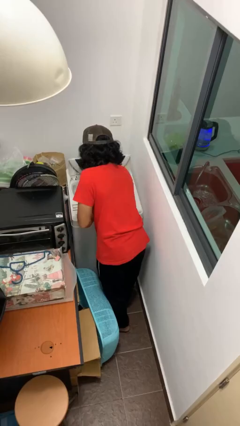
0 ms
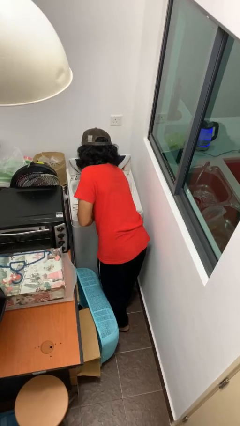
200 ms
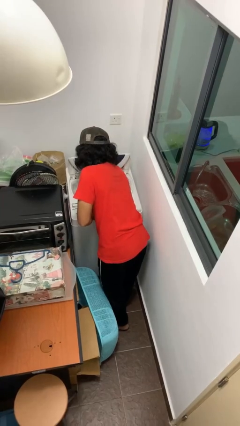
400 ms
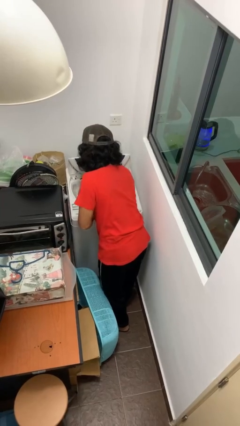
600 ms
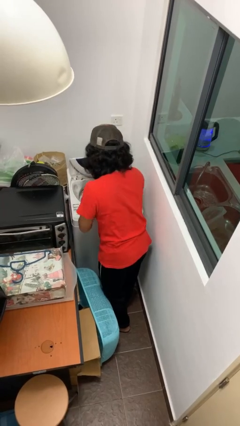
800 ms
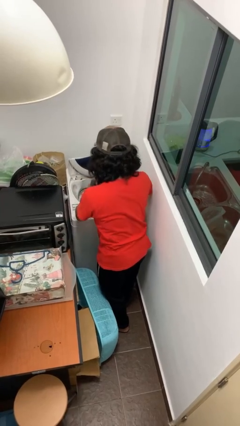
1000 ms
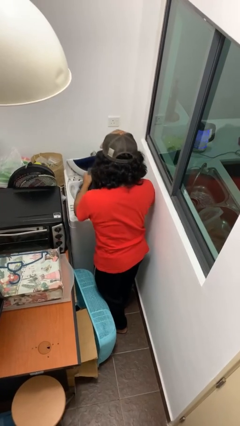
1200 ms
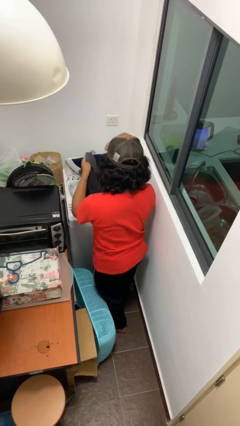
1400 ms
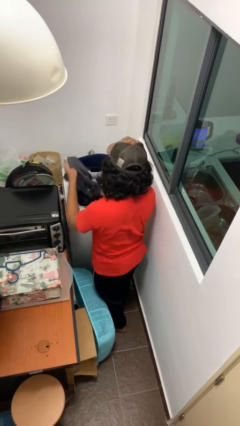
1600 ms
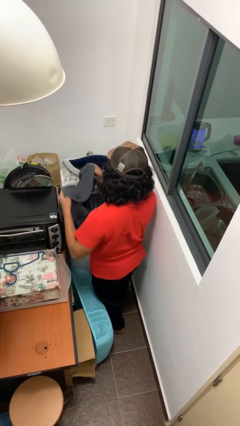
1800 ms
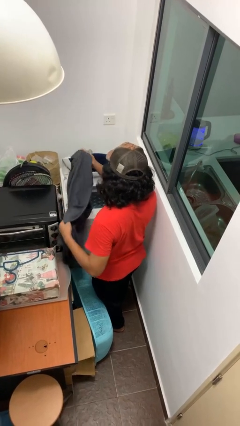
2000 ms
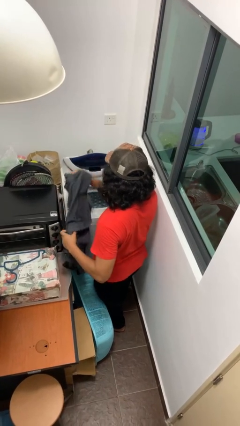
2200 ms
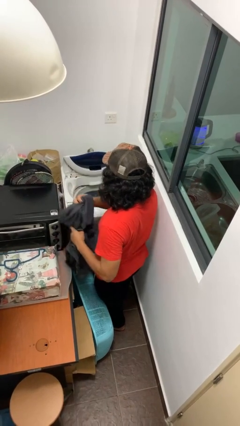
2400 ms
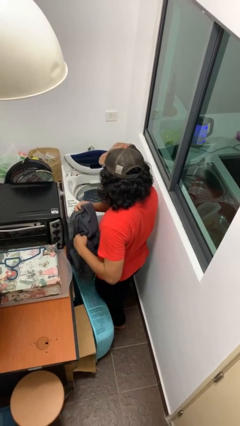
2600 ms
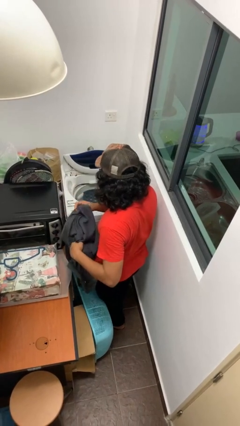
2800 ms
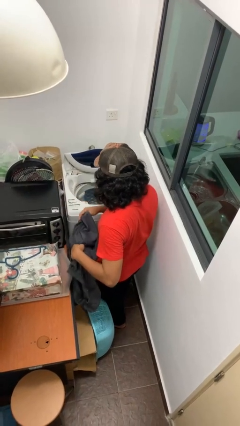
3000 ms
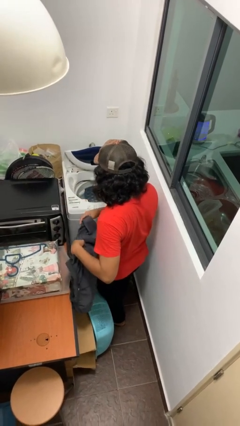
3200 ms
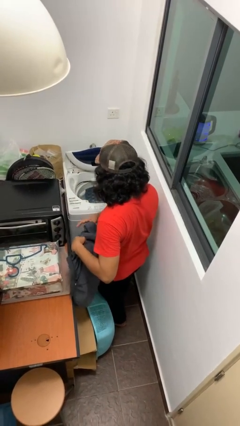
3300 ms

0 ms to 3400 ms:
person unloads clotheswasher

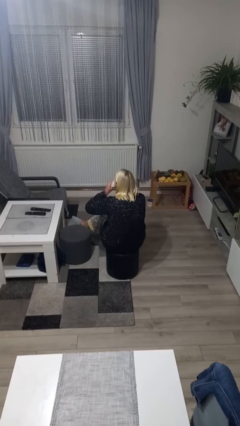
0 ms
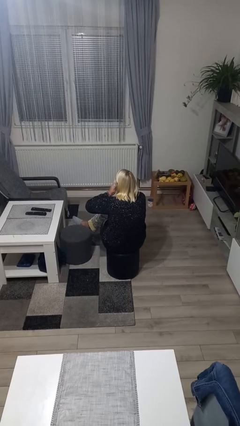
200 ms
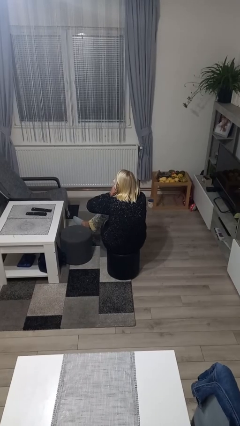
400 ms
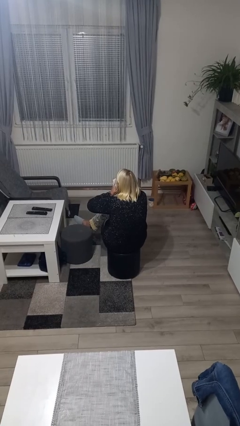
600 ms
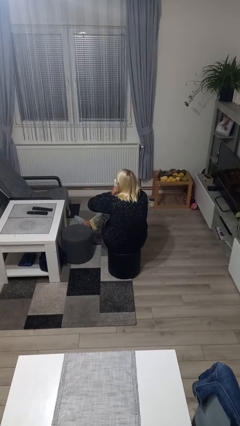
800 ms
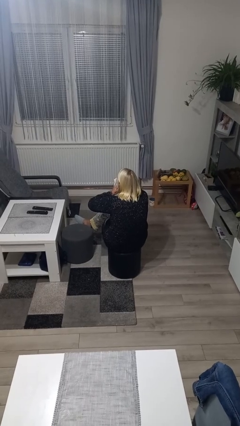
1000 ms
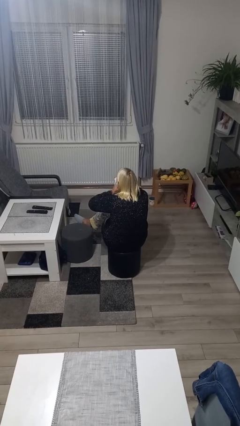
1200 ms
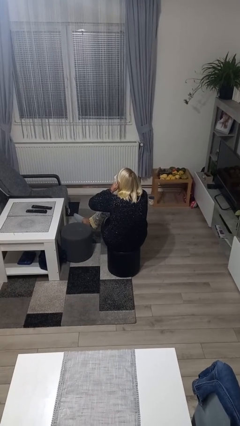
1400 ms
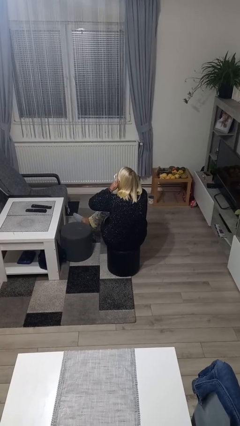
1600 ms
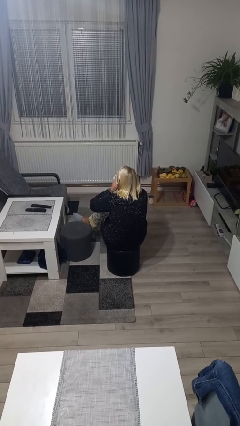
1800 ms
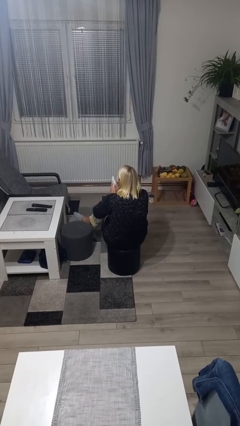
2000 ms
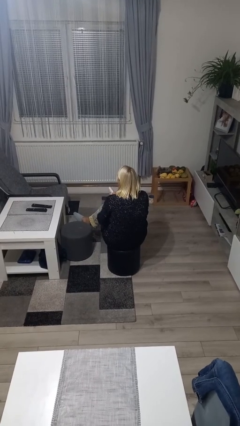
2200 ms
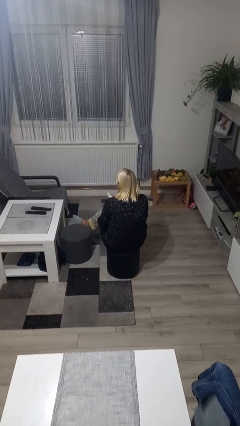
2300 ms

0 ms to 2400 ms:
person blows nose

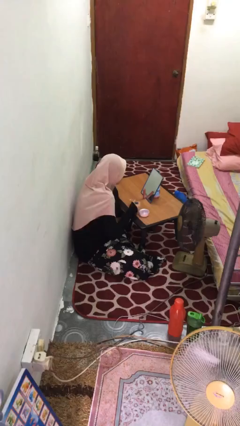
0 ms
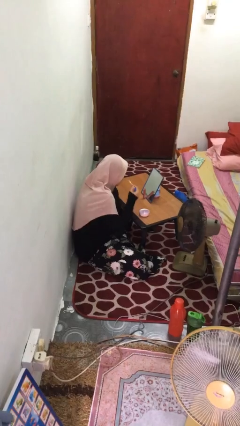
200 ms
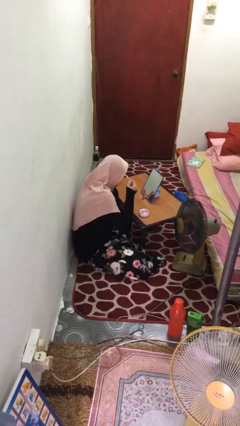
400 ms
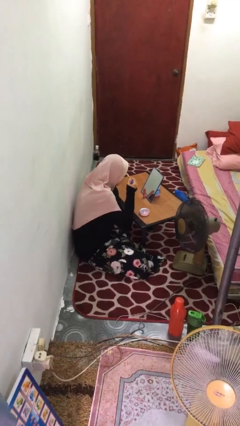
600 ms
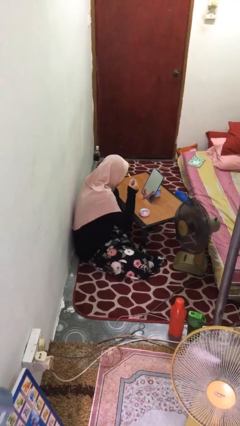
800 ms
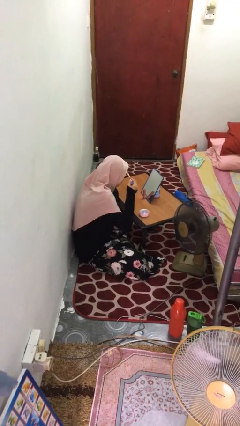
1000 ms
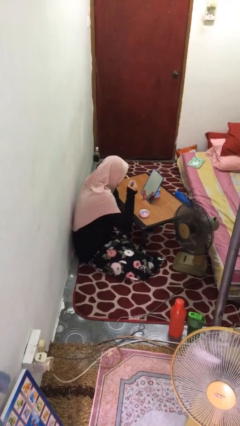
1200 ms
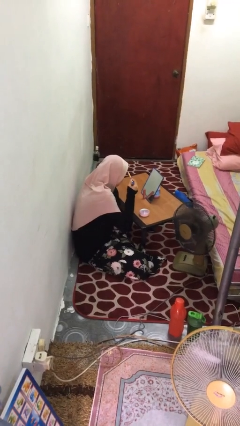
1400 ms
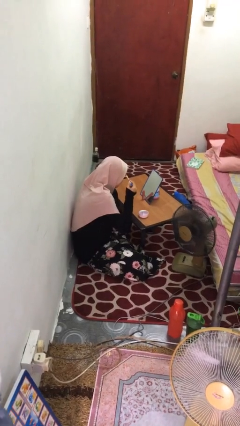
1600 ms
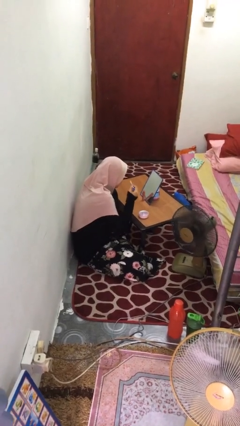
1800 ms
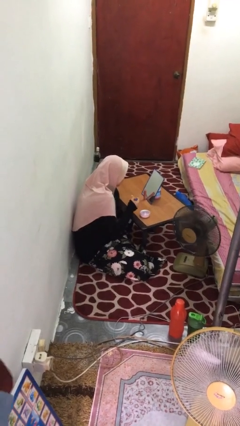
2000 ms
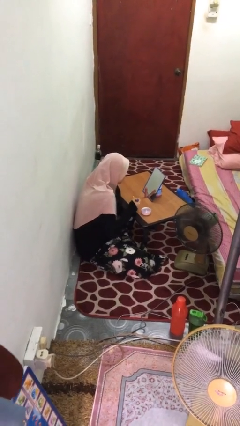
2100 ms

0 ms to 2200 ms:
person applies eye makeup

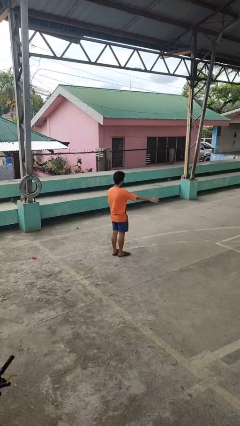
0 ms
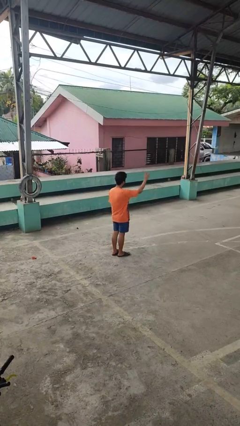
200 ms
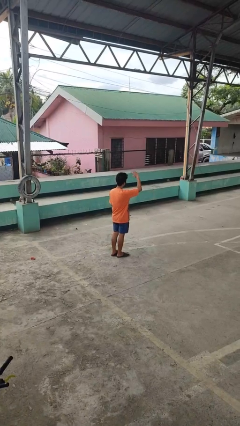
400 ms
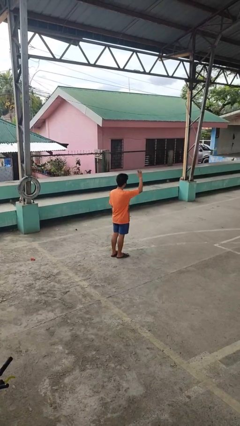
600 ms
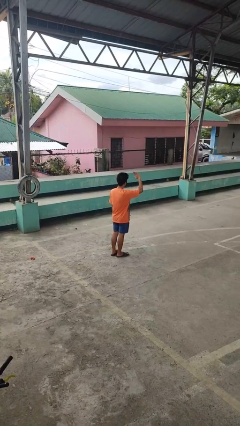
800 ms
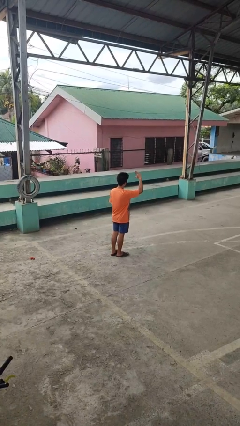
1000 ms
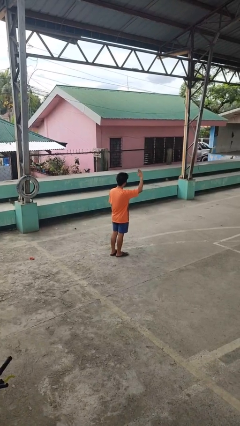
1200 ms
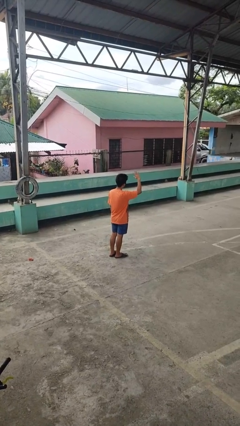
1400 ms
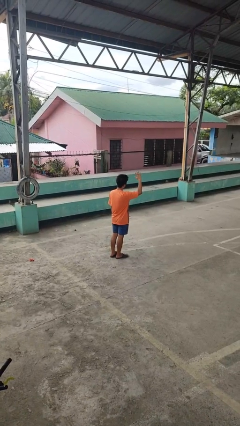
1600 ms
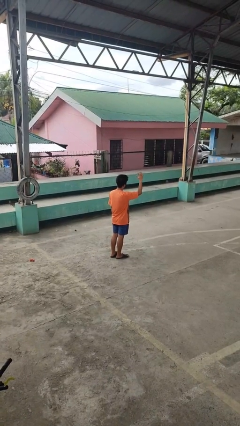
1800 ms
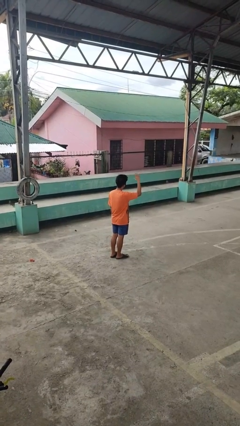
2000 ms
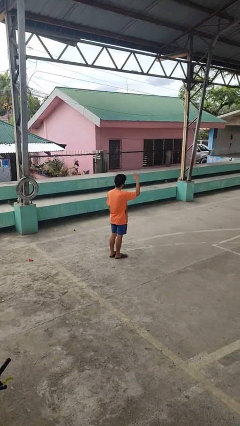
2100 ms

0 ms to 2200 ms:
person waves at person

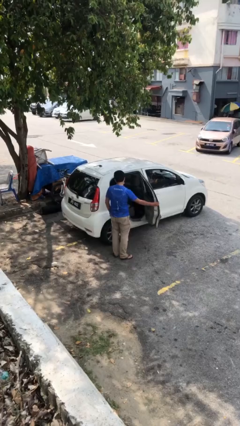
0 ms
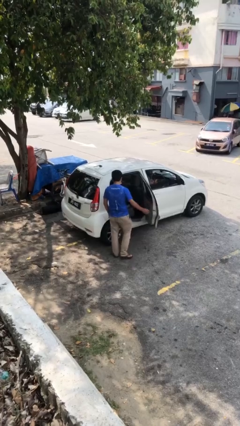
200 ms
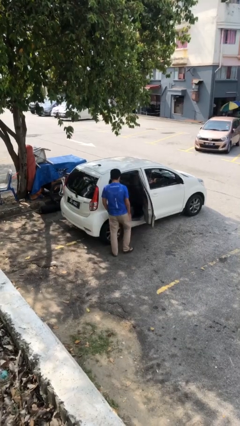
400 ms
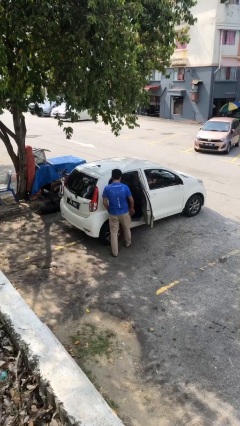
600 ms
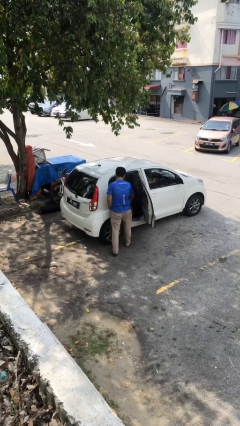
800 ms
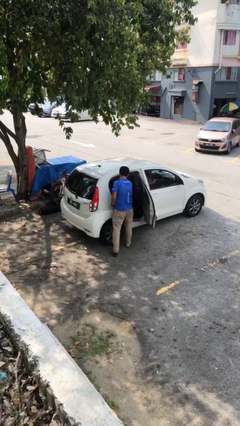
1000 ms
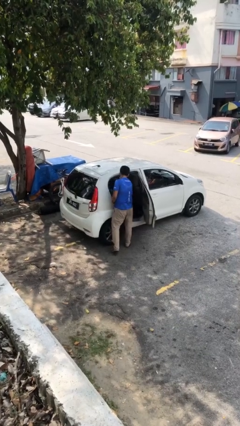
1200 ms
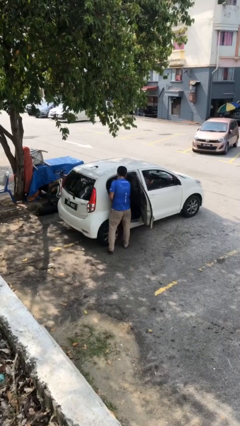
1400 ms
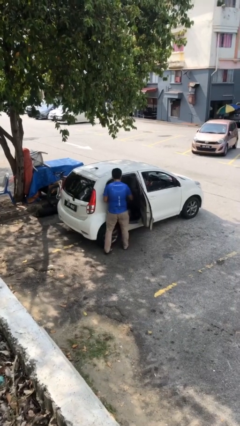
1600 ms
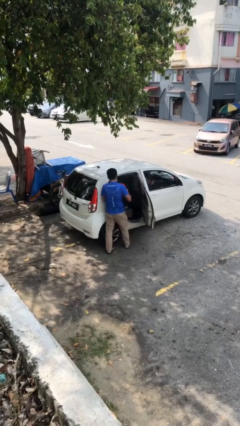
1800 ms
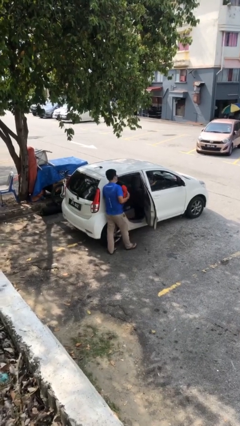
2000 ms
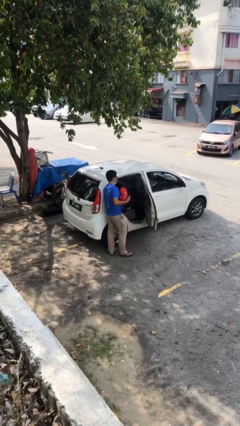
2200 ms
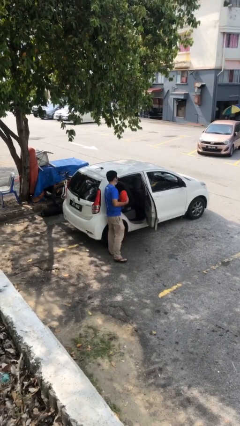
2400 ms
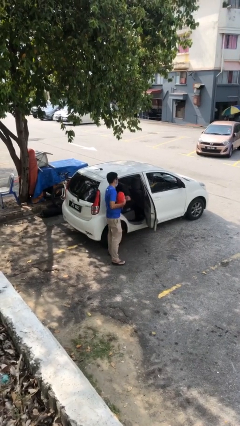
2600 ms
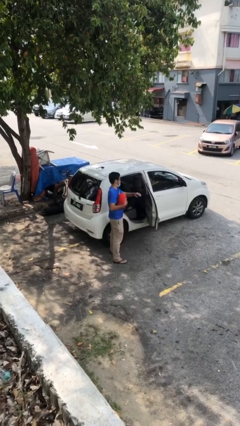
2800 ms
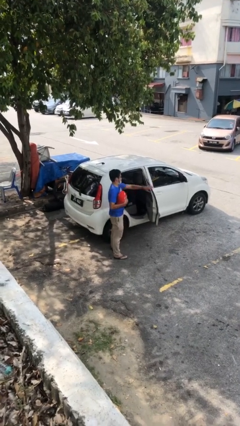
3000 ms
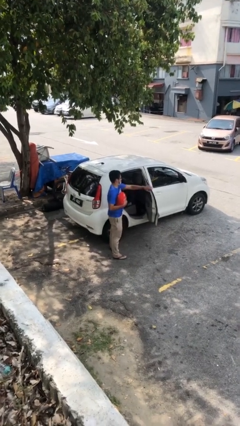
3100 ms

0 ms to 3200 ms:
person unloads car

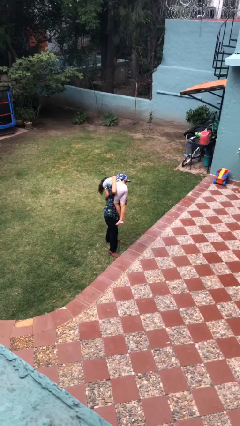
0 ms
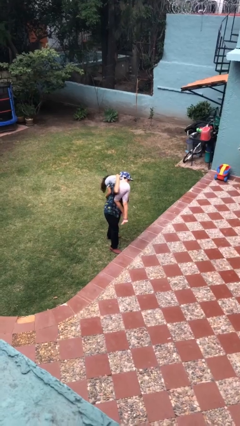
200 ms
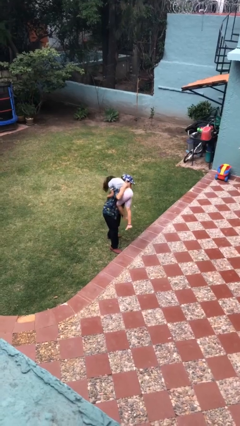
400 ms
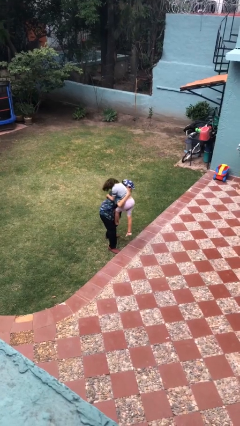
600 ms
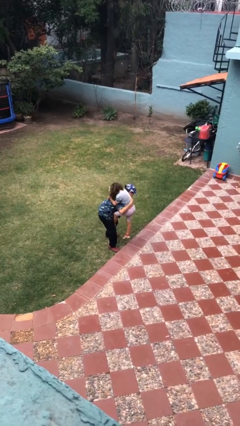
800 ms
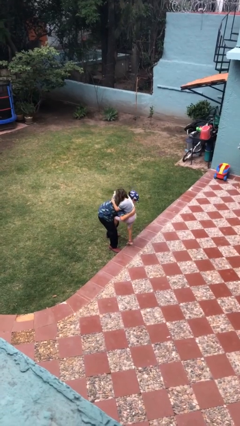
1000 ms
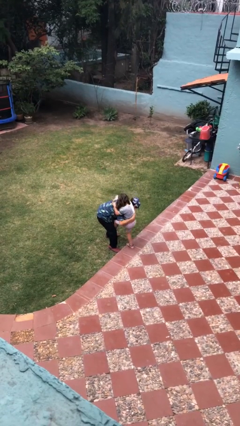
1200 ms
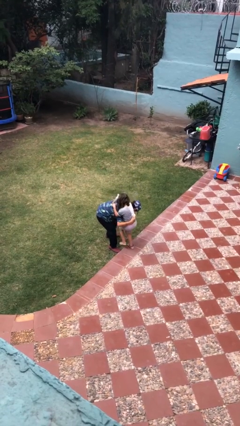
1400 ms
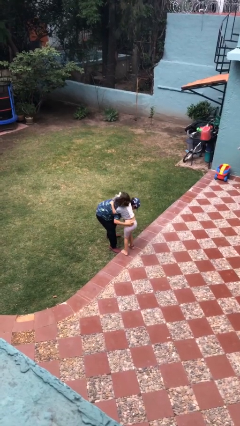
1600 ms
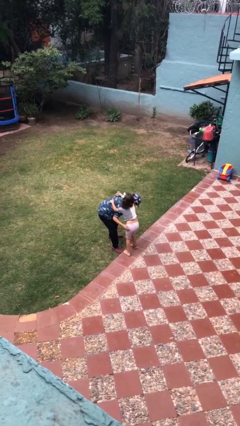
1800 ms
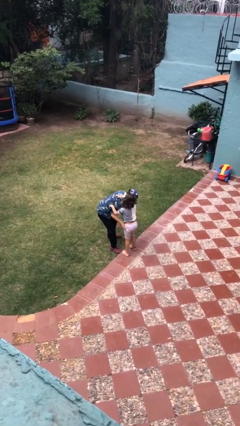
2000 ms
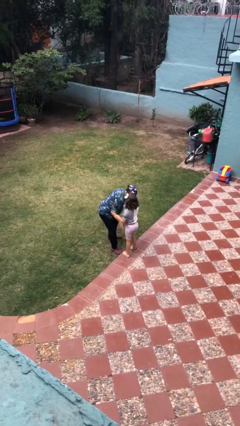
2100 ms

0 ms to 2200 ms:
person puts down person

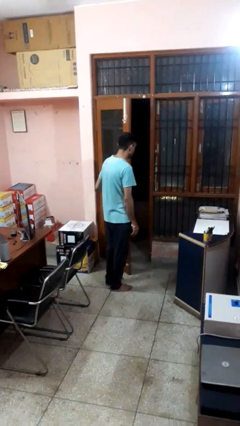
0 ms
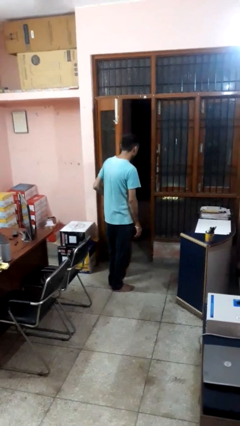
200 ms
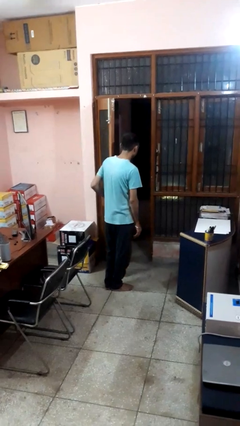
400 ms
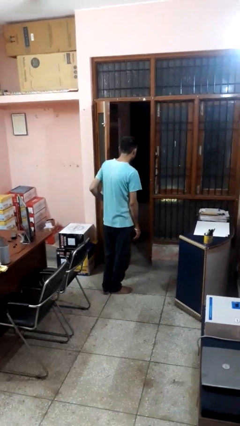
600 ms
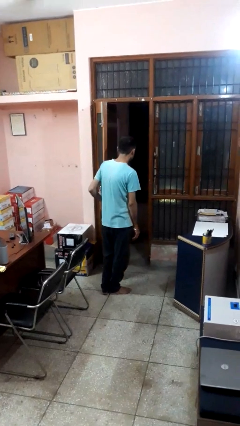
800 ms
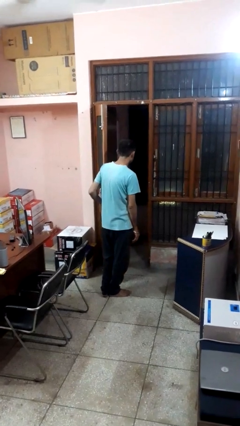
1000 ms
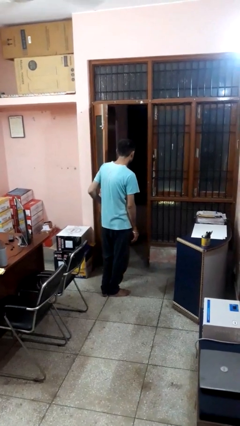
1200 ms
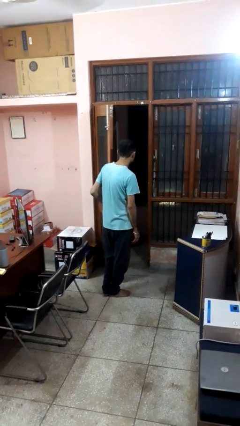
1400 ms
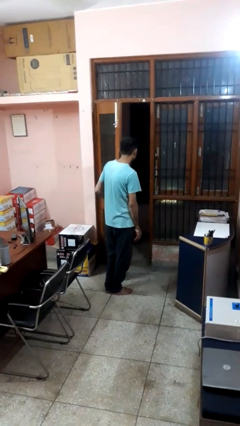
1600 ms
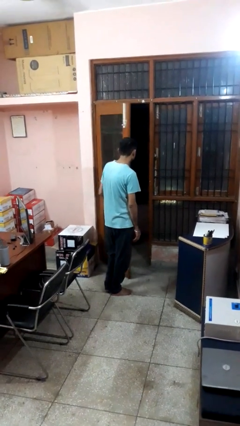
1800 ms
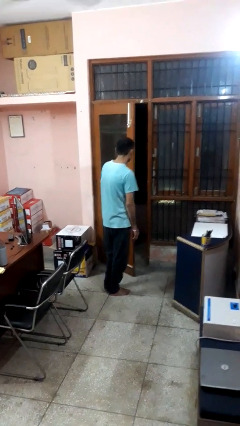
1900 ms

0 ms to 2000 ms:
person opens facility door
